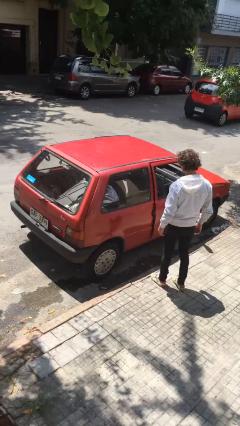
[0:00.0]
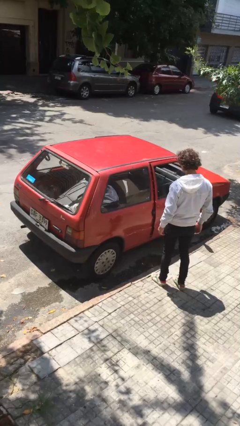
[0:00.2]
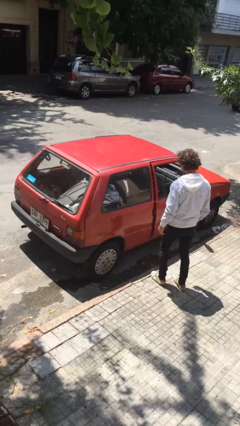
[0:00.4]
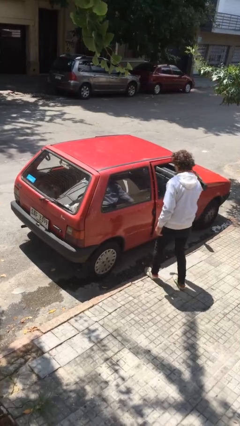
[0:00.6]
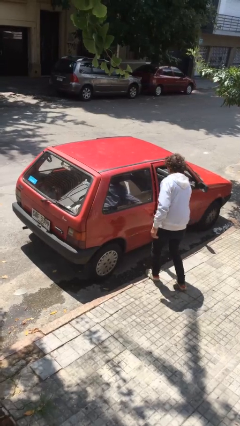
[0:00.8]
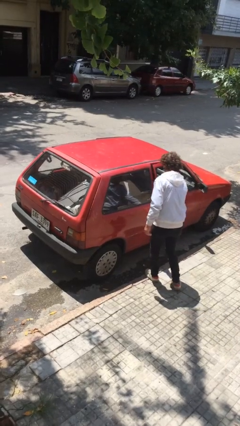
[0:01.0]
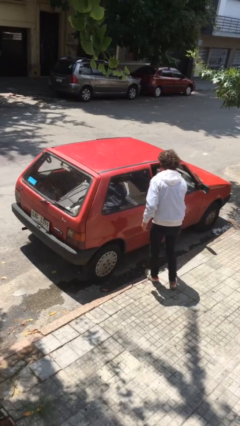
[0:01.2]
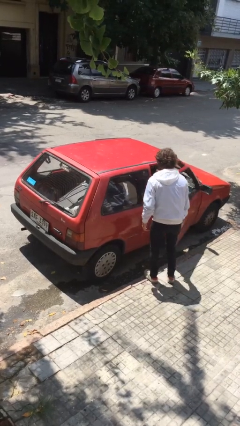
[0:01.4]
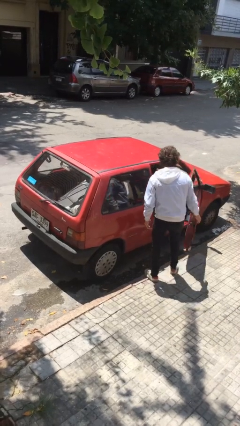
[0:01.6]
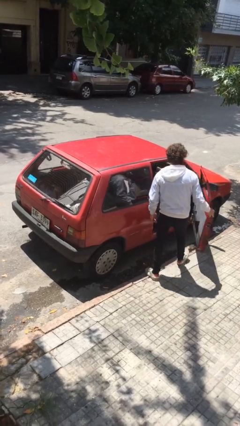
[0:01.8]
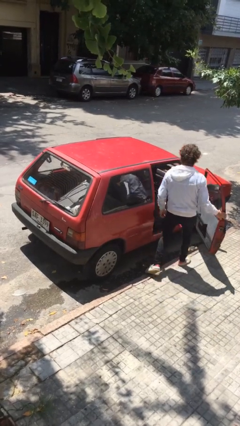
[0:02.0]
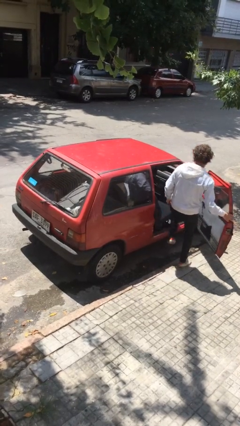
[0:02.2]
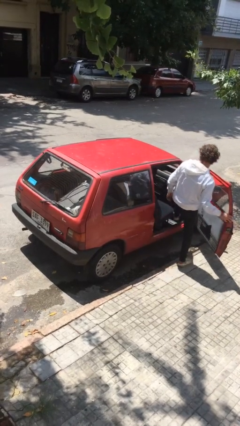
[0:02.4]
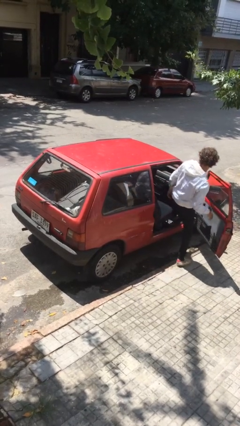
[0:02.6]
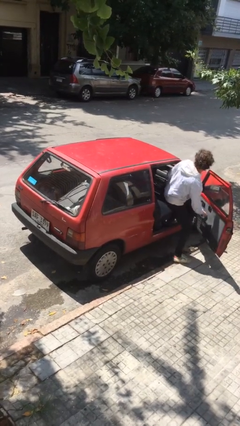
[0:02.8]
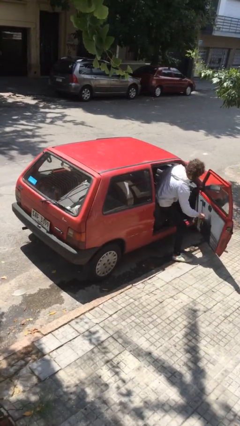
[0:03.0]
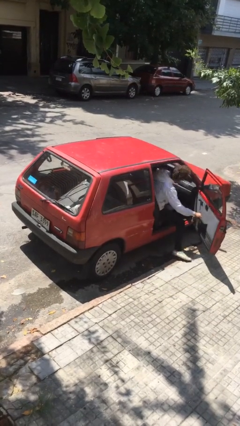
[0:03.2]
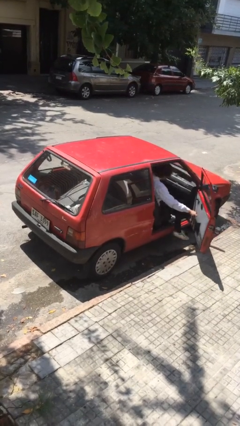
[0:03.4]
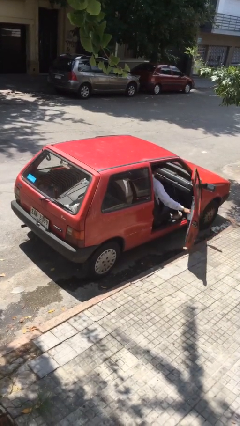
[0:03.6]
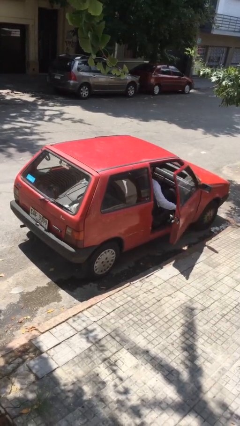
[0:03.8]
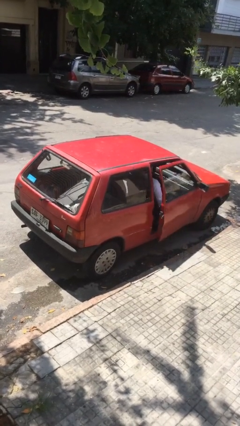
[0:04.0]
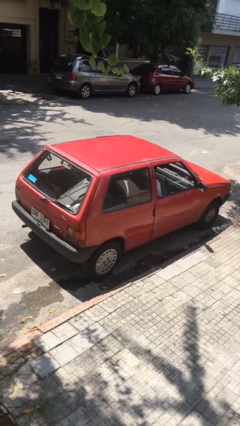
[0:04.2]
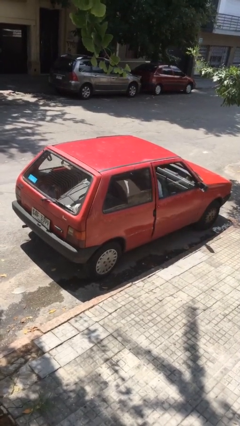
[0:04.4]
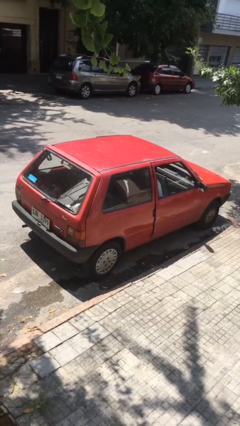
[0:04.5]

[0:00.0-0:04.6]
car picks up person

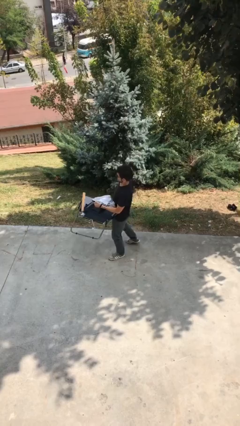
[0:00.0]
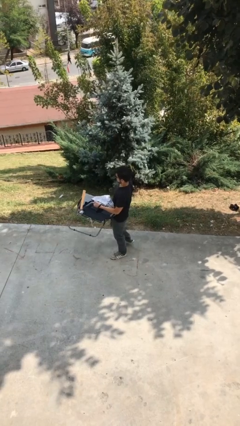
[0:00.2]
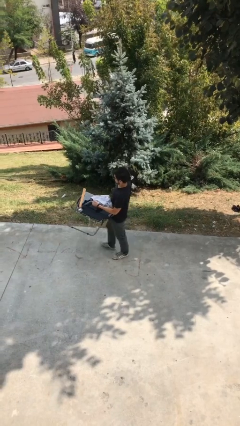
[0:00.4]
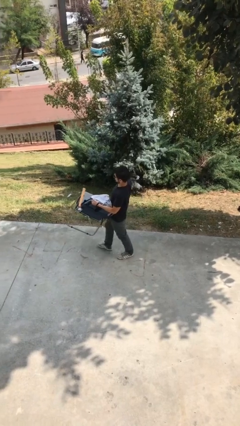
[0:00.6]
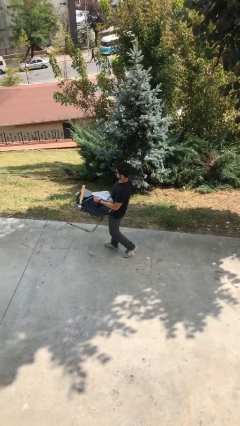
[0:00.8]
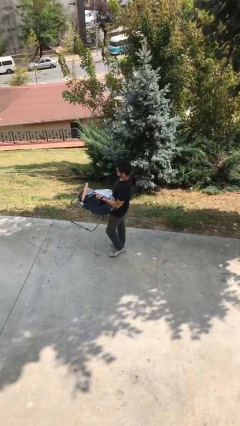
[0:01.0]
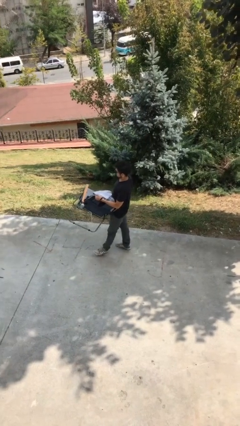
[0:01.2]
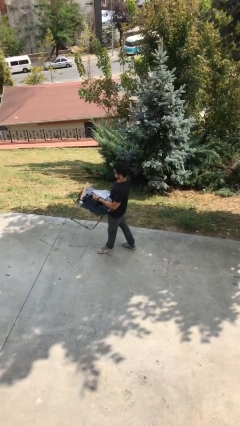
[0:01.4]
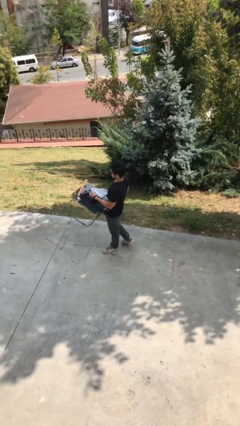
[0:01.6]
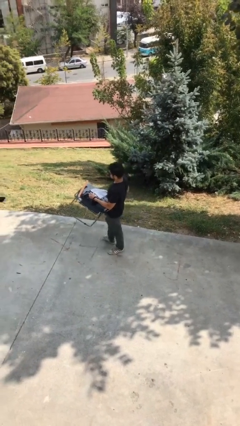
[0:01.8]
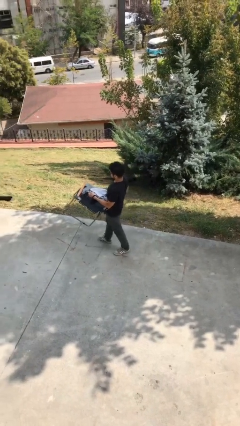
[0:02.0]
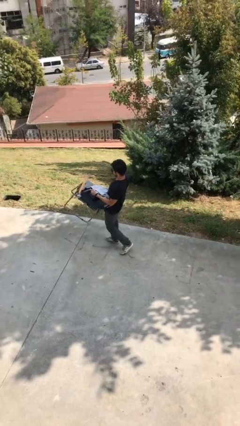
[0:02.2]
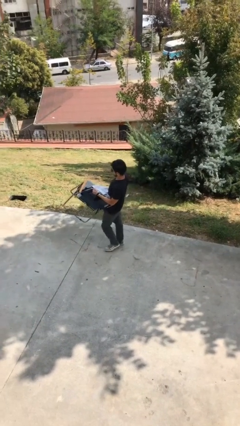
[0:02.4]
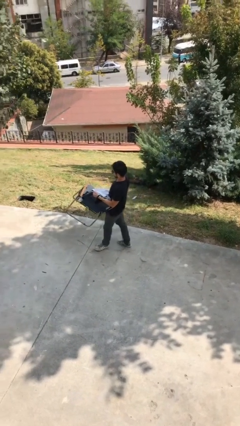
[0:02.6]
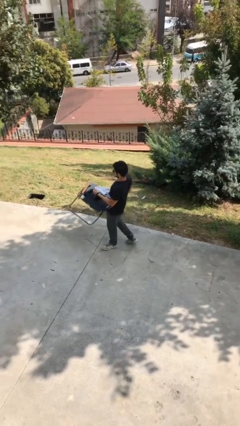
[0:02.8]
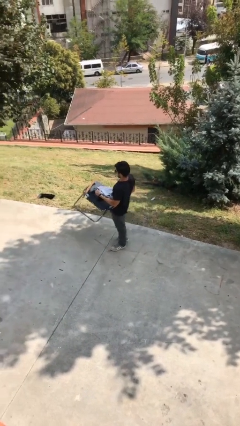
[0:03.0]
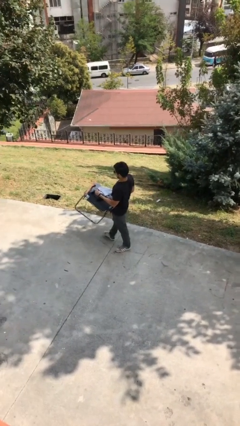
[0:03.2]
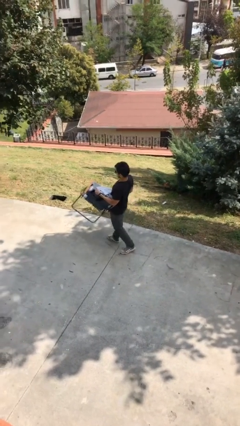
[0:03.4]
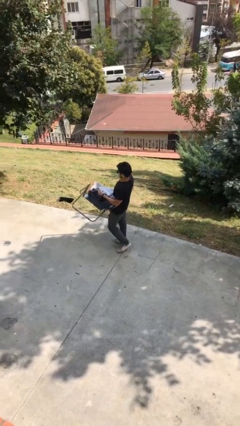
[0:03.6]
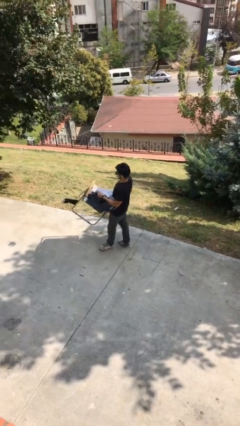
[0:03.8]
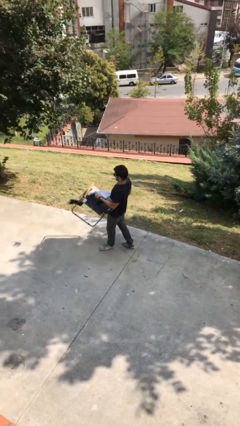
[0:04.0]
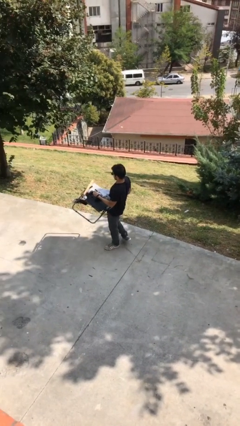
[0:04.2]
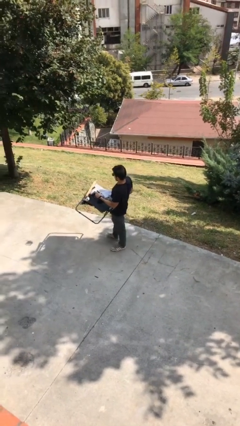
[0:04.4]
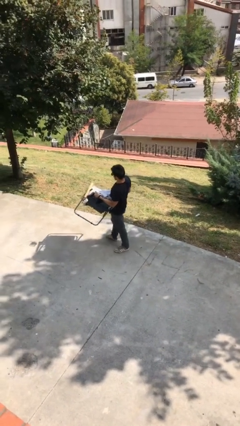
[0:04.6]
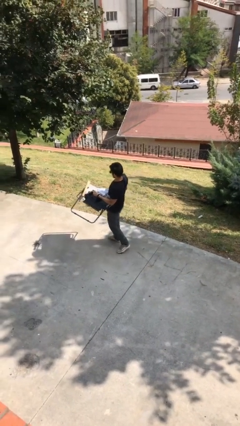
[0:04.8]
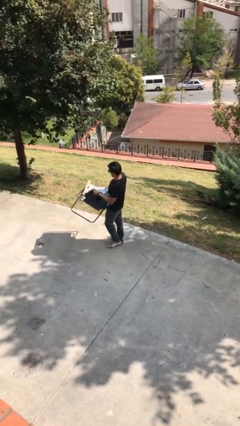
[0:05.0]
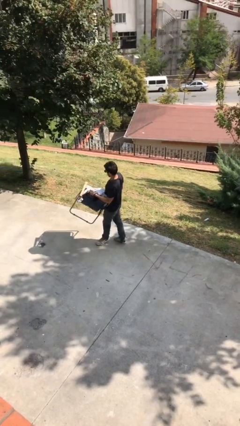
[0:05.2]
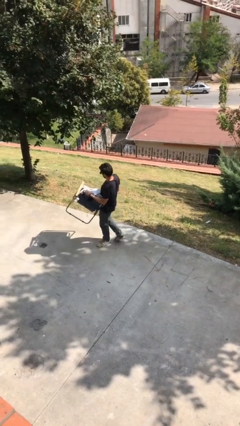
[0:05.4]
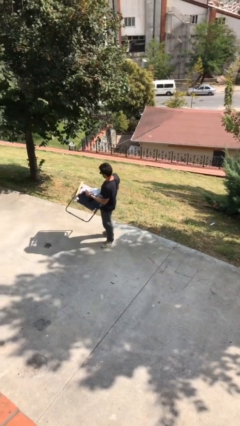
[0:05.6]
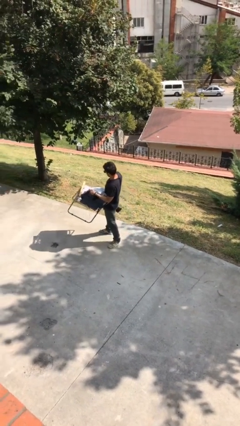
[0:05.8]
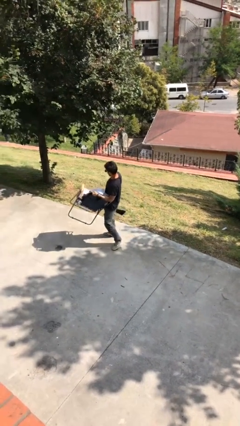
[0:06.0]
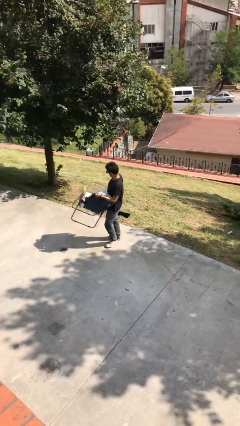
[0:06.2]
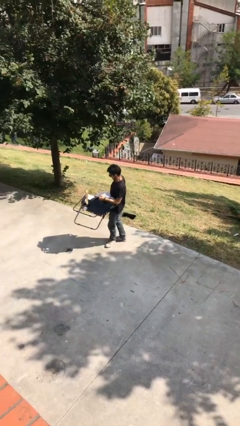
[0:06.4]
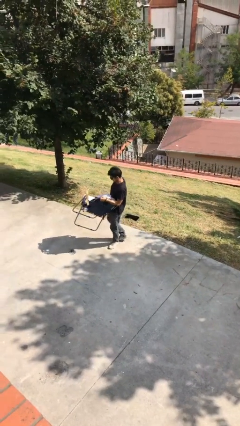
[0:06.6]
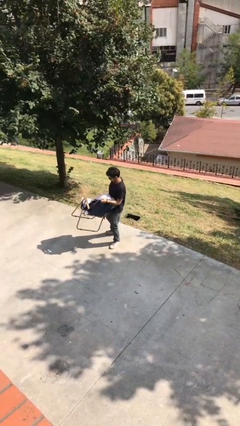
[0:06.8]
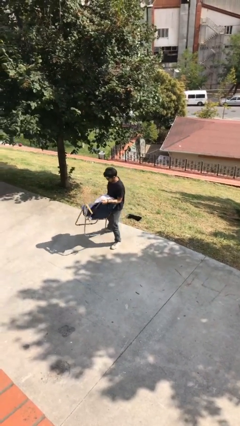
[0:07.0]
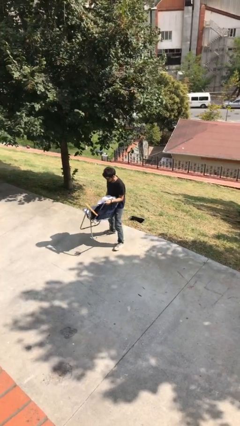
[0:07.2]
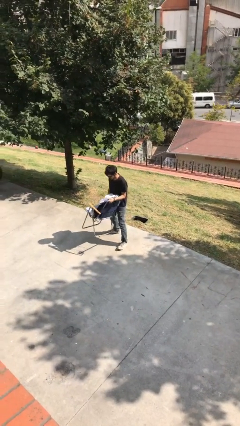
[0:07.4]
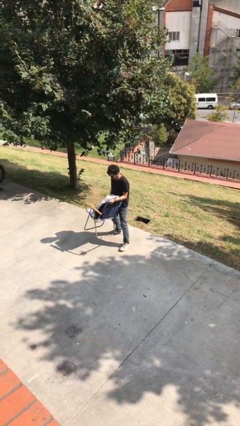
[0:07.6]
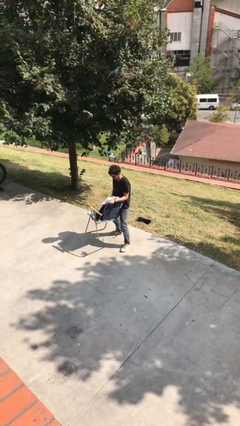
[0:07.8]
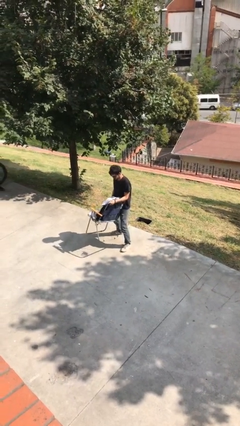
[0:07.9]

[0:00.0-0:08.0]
person carries heavy object

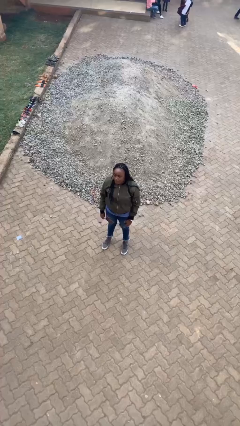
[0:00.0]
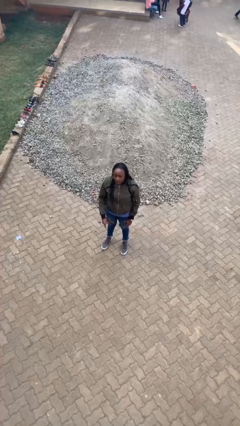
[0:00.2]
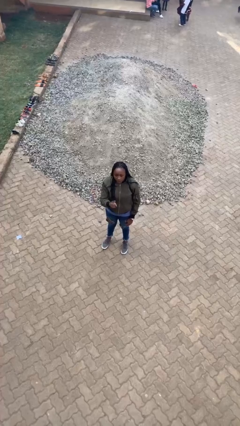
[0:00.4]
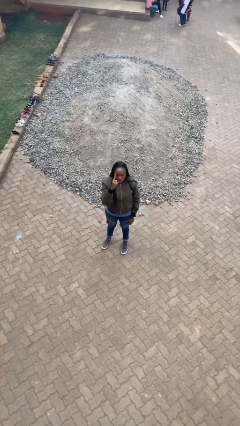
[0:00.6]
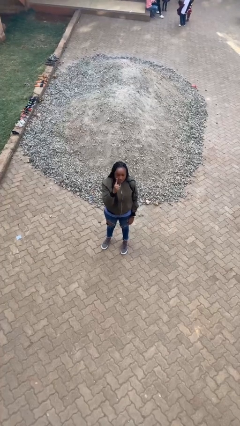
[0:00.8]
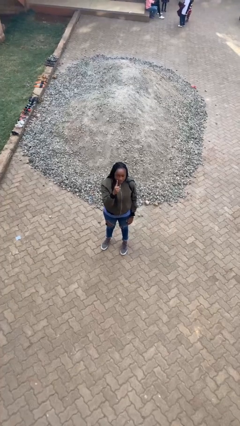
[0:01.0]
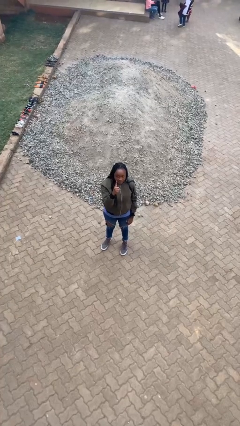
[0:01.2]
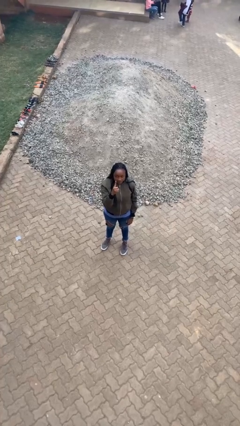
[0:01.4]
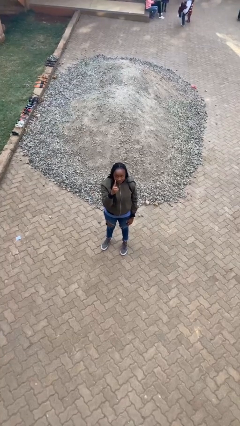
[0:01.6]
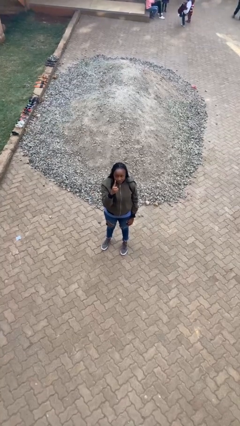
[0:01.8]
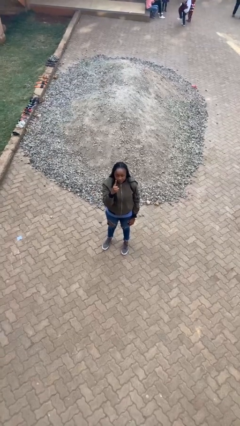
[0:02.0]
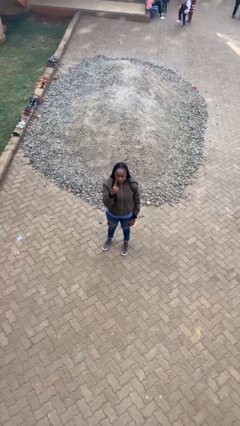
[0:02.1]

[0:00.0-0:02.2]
person gestures number one

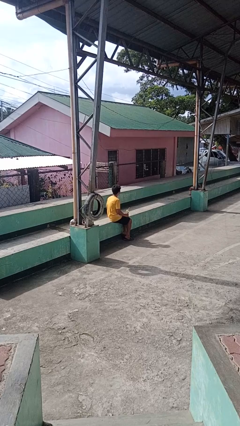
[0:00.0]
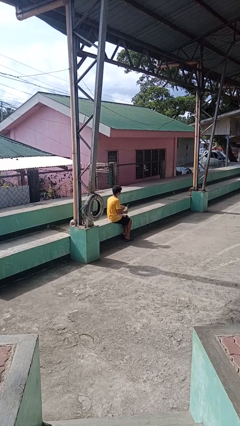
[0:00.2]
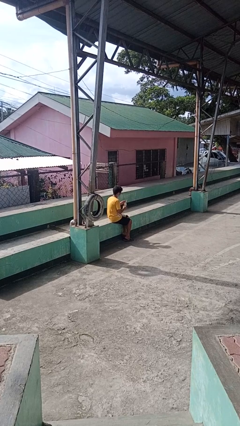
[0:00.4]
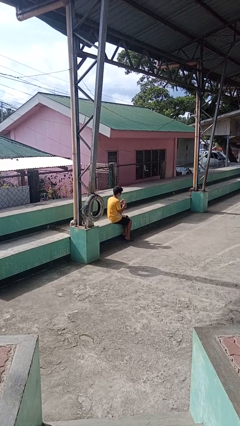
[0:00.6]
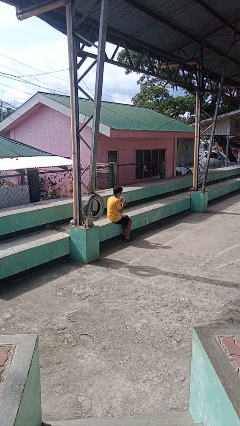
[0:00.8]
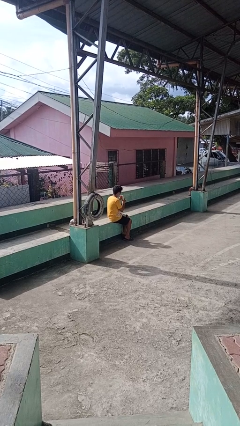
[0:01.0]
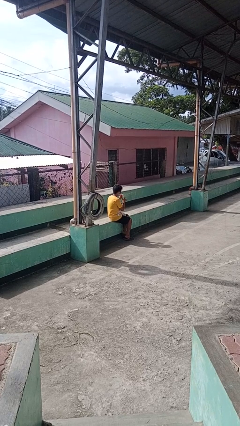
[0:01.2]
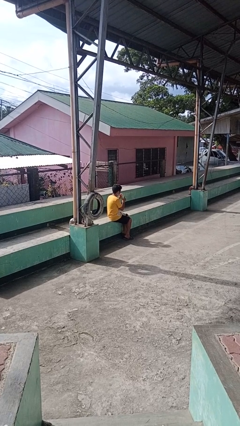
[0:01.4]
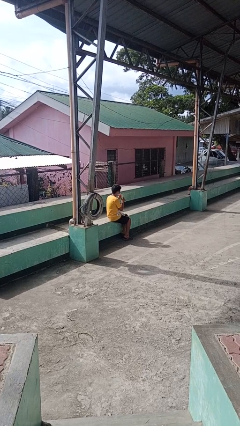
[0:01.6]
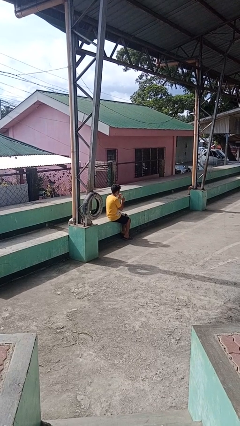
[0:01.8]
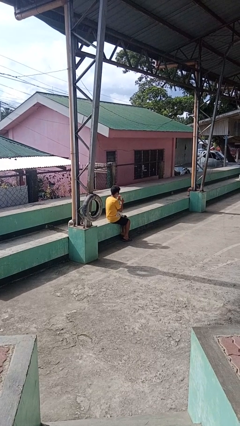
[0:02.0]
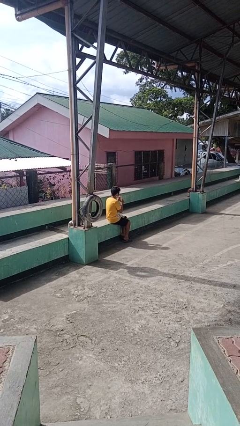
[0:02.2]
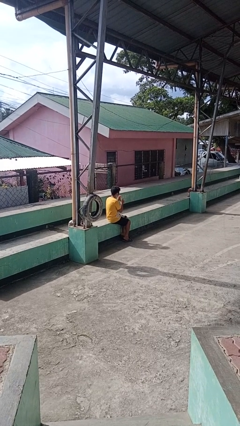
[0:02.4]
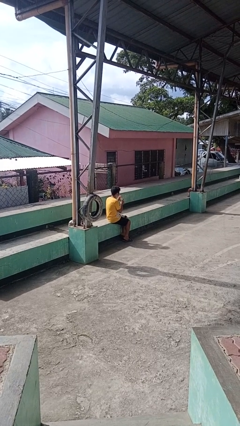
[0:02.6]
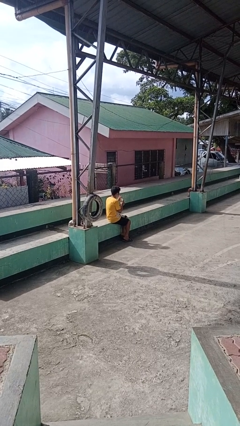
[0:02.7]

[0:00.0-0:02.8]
person drinks from straw
